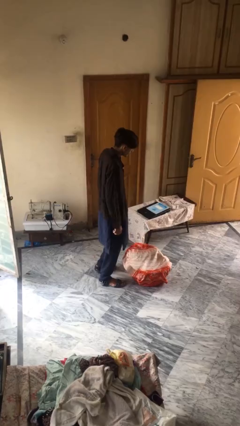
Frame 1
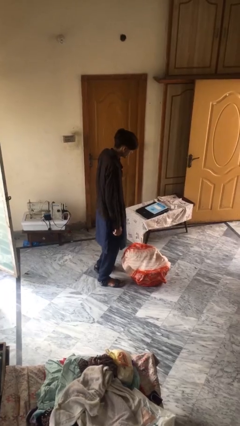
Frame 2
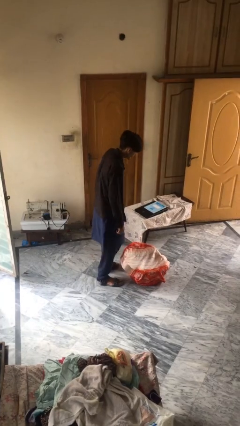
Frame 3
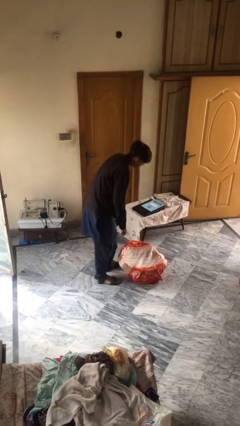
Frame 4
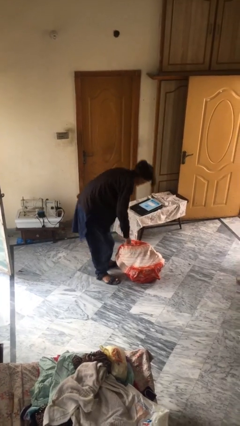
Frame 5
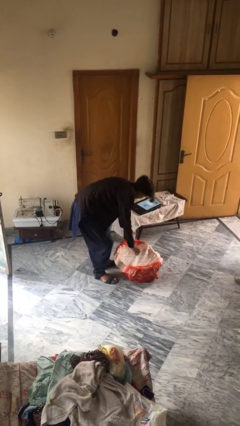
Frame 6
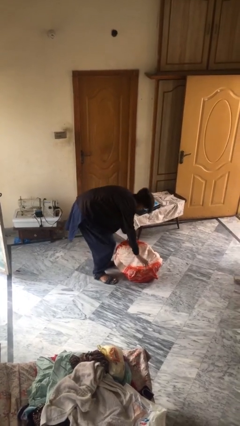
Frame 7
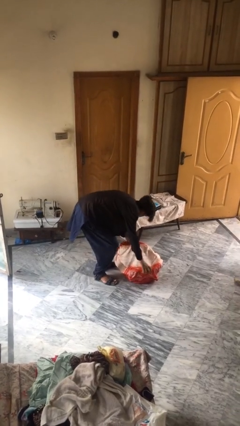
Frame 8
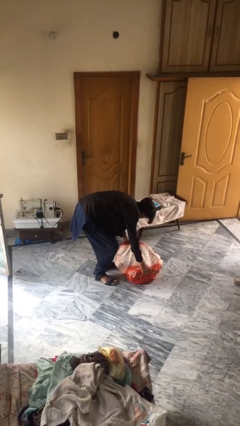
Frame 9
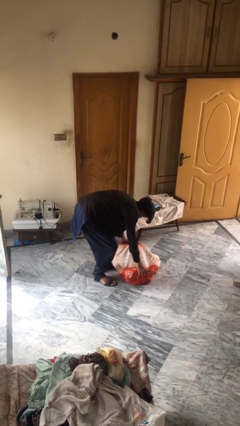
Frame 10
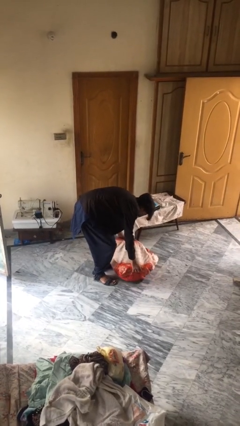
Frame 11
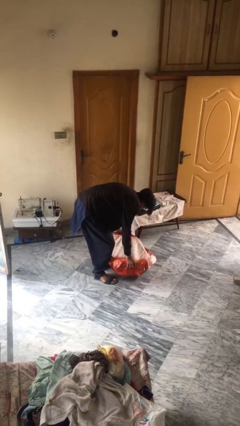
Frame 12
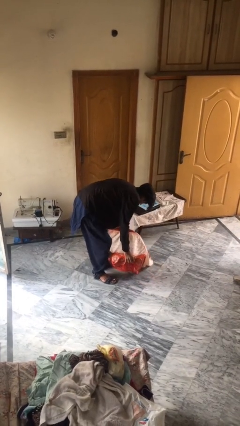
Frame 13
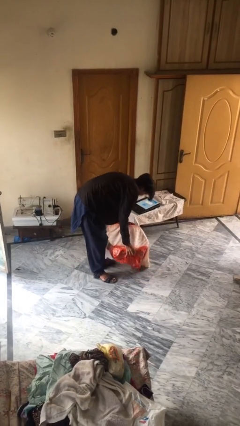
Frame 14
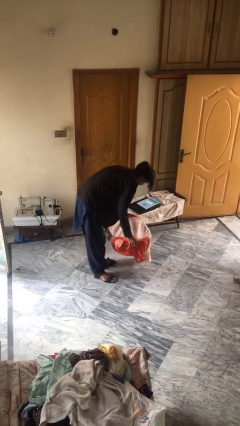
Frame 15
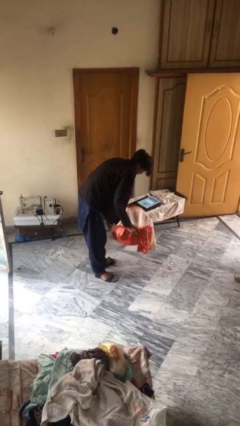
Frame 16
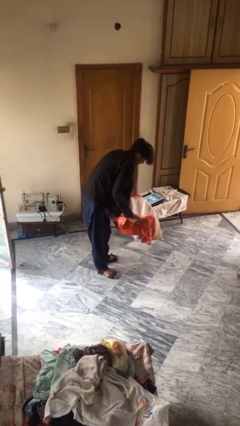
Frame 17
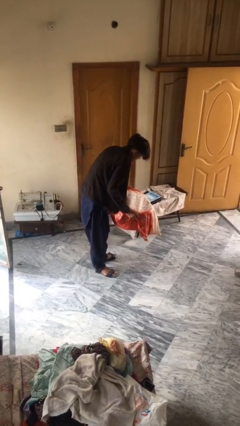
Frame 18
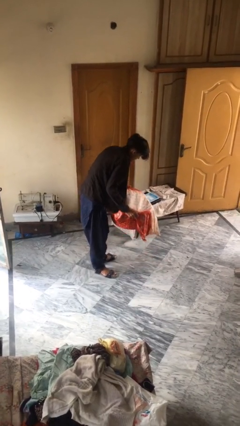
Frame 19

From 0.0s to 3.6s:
person picks up object from floor

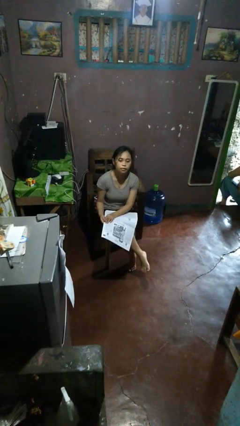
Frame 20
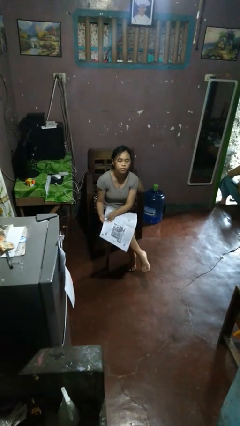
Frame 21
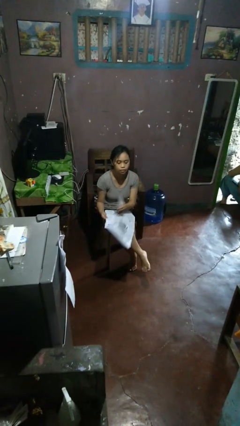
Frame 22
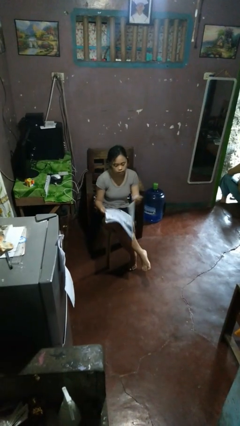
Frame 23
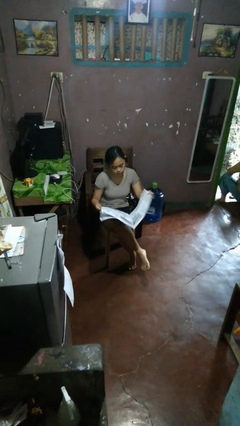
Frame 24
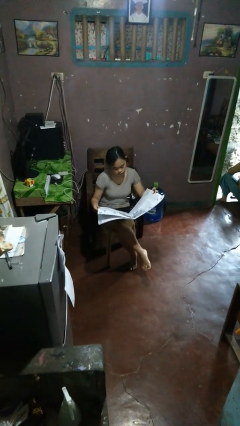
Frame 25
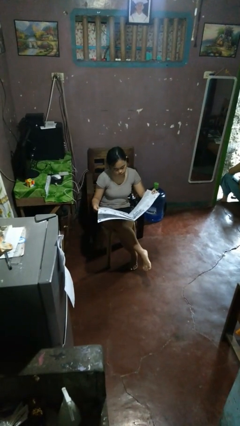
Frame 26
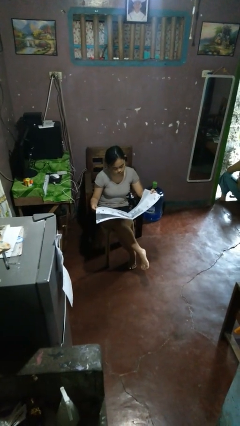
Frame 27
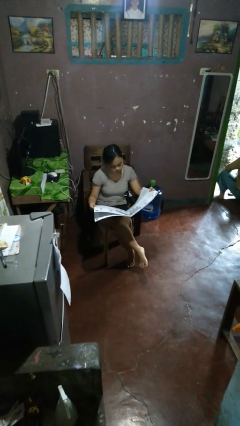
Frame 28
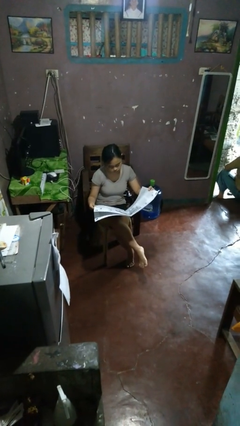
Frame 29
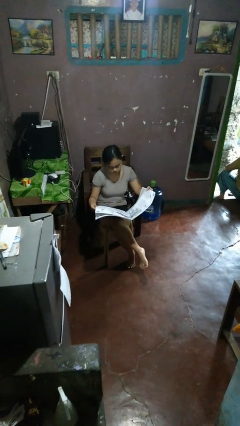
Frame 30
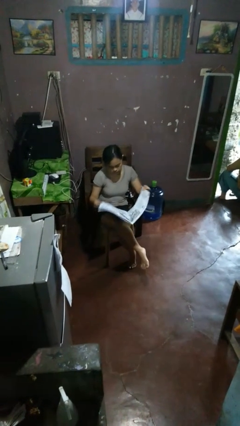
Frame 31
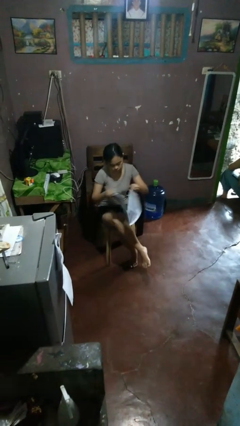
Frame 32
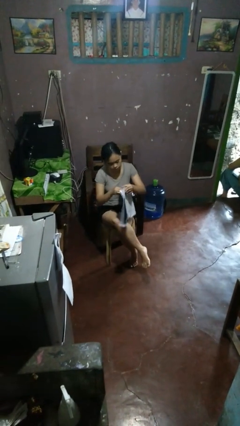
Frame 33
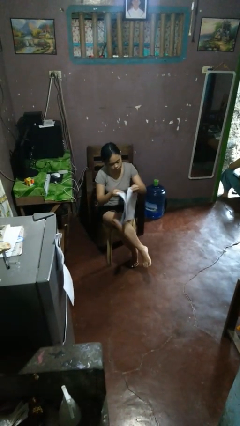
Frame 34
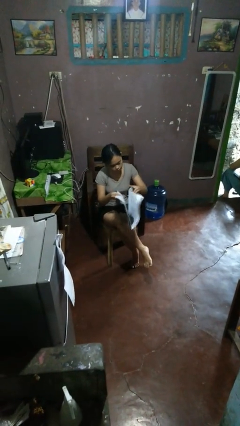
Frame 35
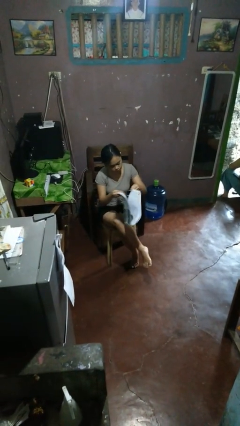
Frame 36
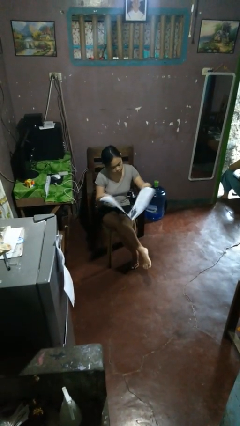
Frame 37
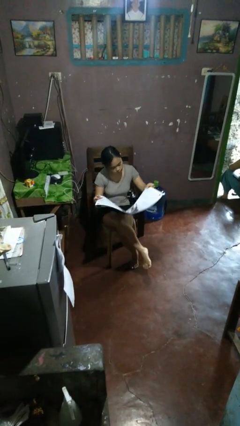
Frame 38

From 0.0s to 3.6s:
person reads newspaper

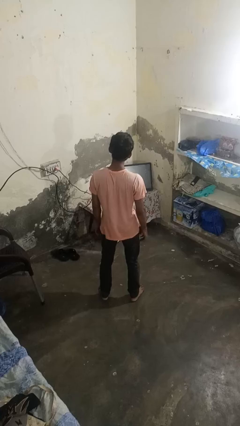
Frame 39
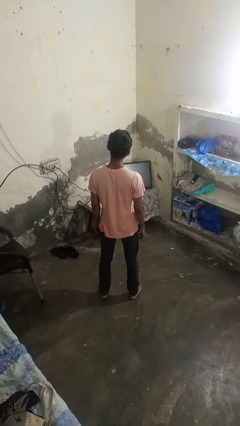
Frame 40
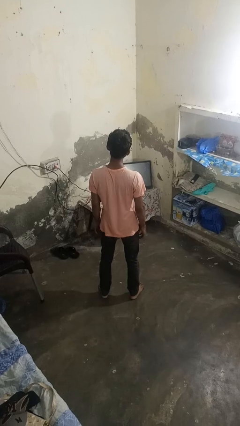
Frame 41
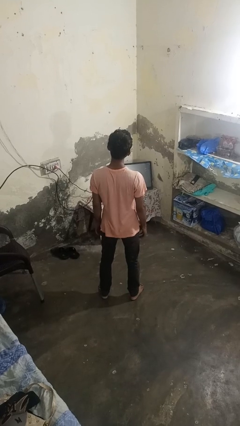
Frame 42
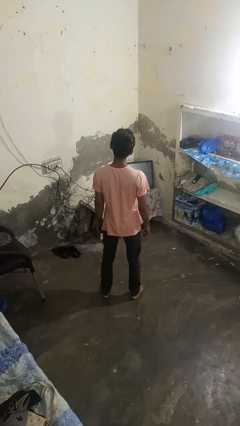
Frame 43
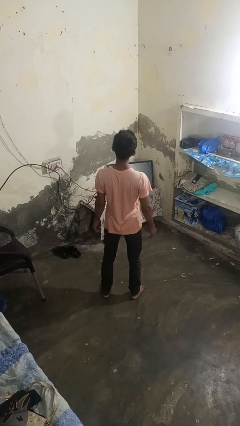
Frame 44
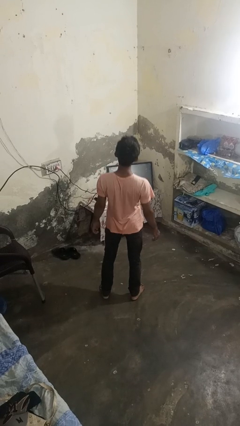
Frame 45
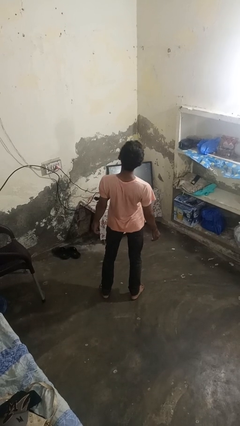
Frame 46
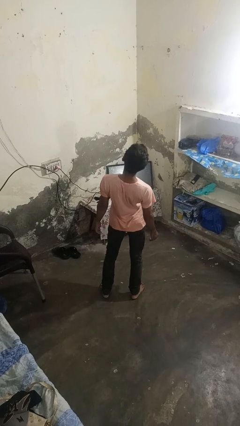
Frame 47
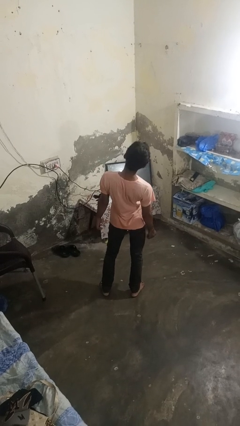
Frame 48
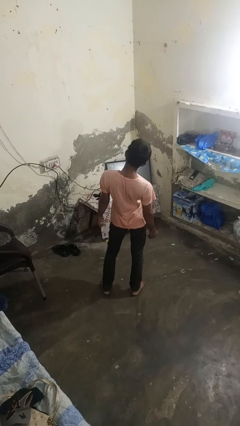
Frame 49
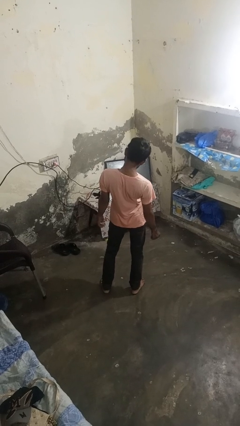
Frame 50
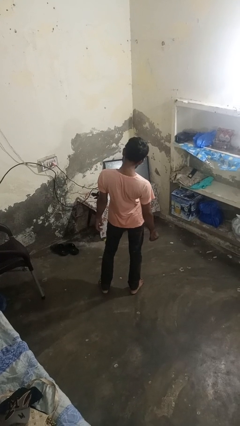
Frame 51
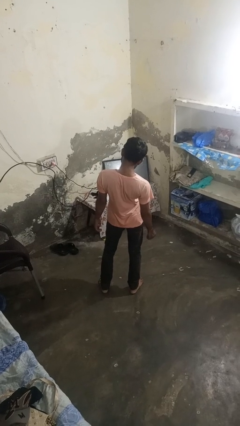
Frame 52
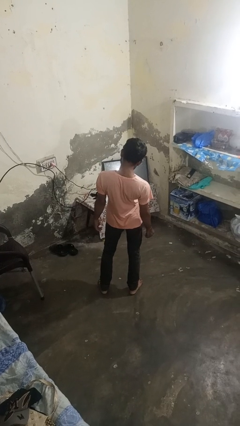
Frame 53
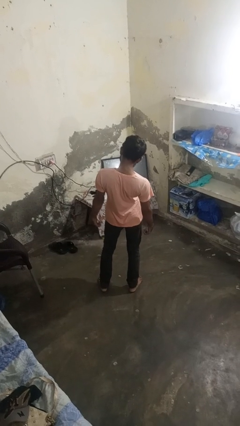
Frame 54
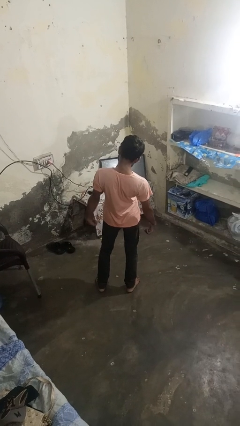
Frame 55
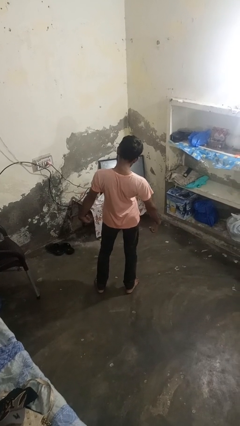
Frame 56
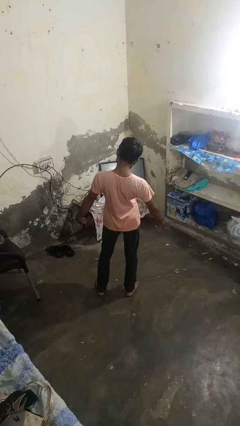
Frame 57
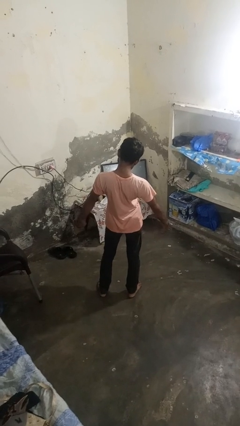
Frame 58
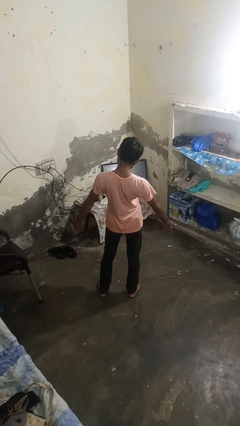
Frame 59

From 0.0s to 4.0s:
person stretches back

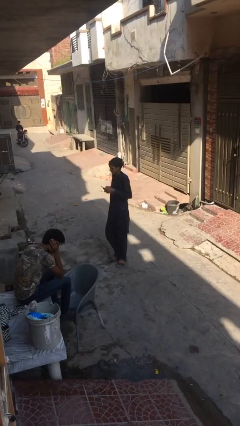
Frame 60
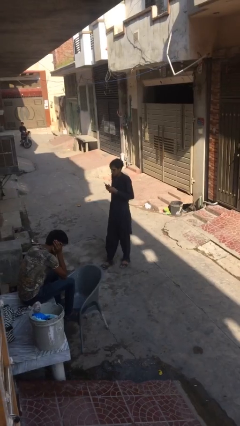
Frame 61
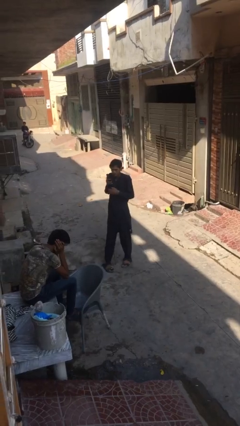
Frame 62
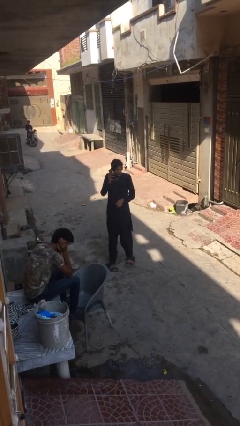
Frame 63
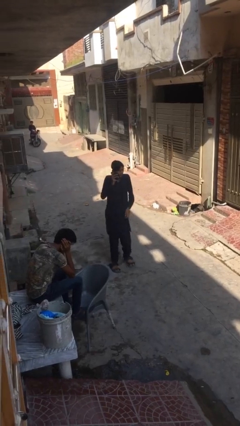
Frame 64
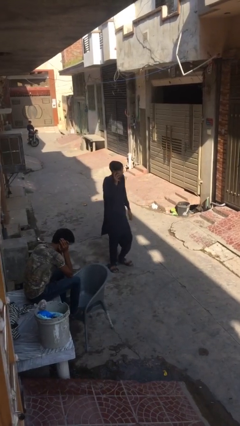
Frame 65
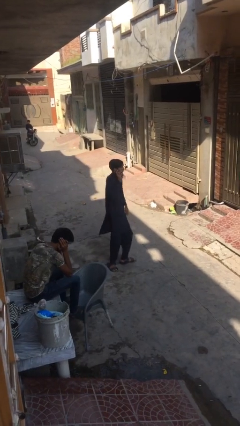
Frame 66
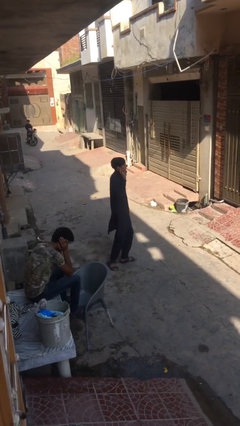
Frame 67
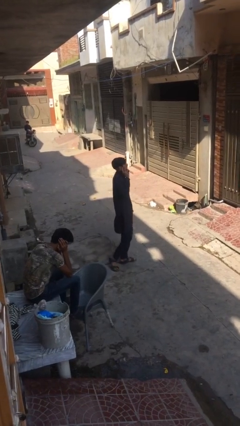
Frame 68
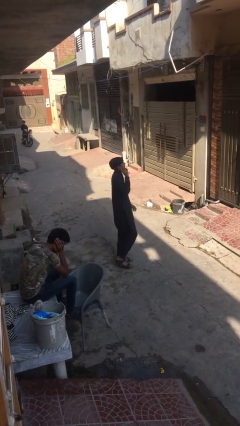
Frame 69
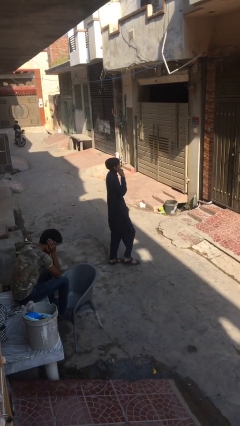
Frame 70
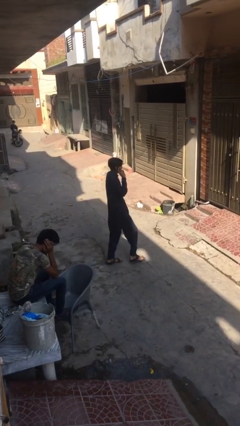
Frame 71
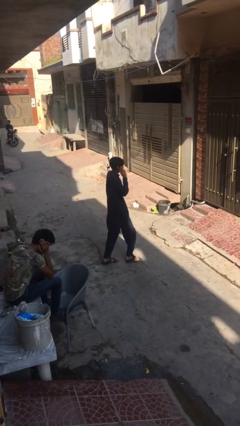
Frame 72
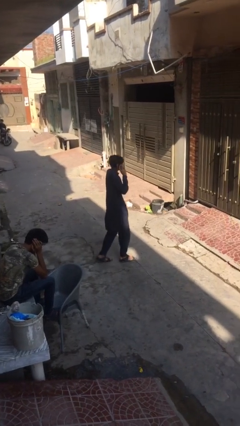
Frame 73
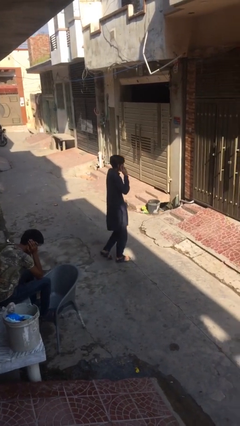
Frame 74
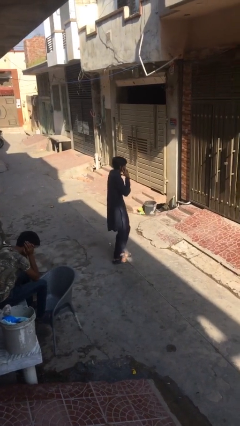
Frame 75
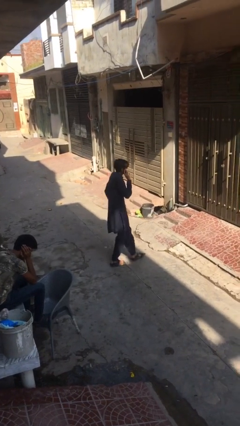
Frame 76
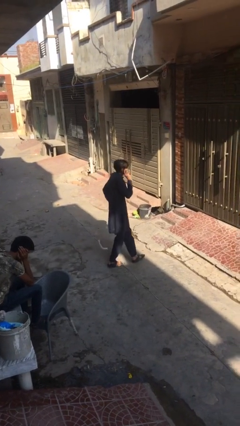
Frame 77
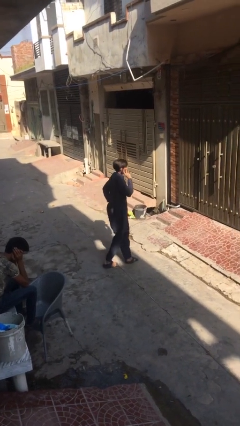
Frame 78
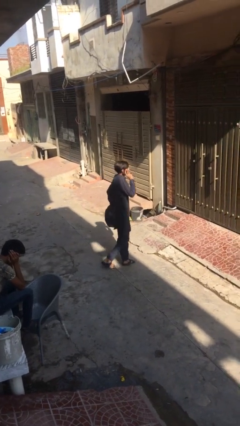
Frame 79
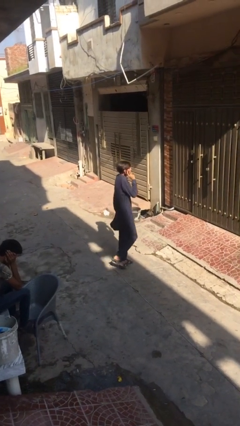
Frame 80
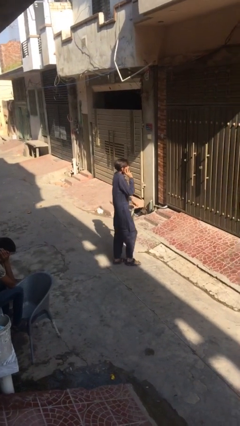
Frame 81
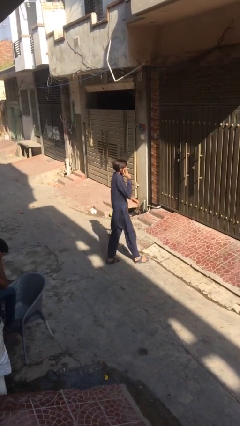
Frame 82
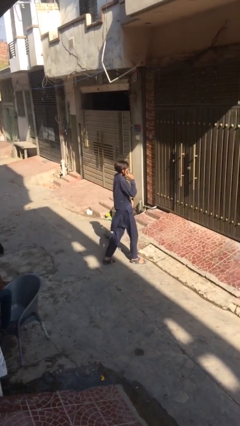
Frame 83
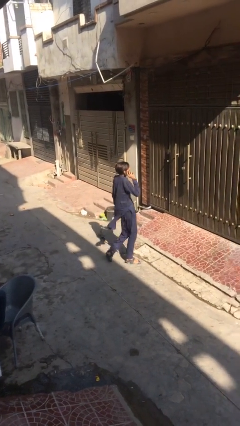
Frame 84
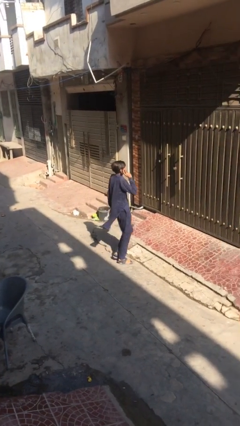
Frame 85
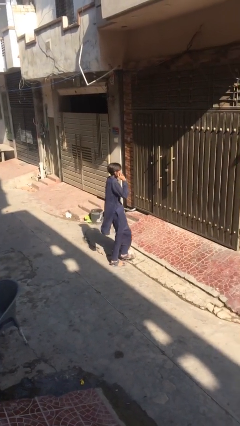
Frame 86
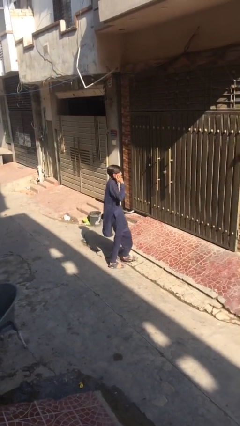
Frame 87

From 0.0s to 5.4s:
person talks on phone

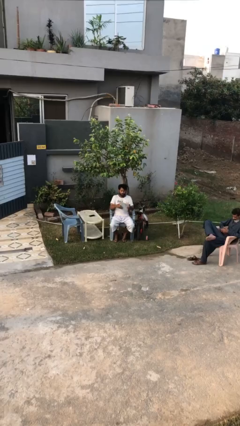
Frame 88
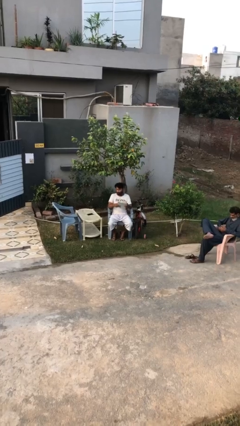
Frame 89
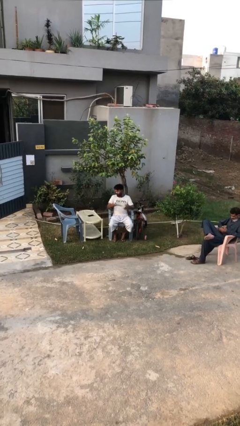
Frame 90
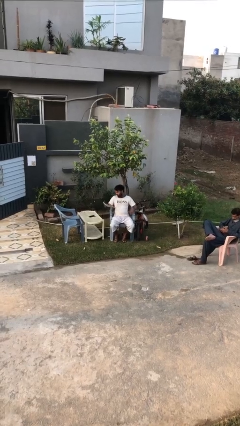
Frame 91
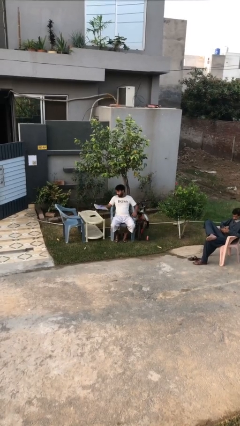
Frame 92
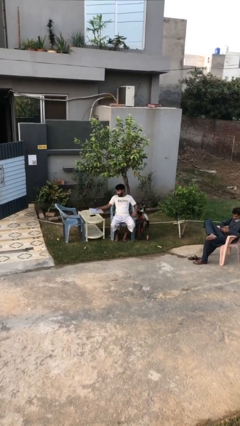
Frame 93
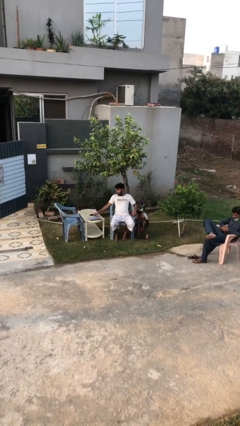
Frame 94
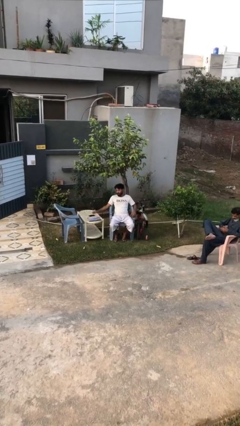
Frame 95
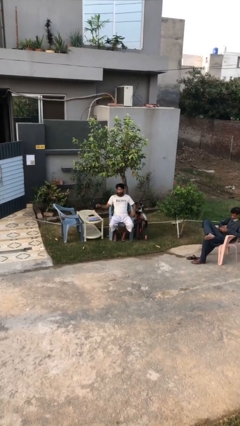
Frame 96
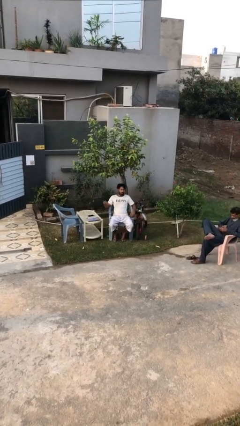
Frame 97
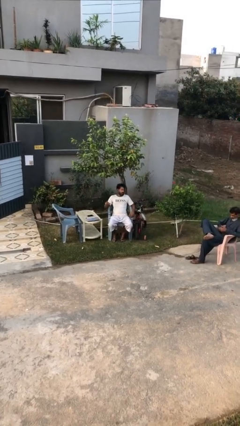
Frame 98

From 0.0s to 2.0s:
person puts down object on table
